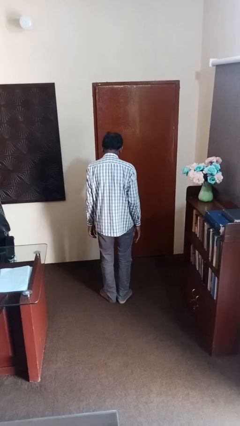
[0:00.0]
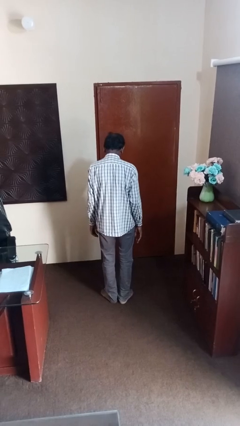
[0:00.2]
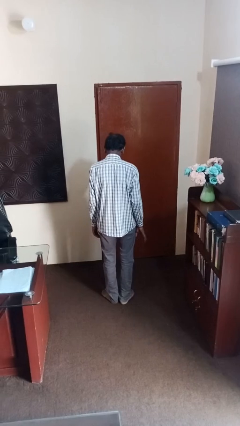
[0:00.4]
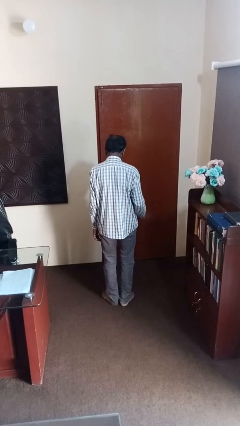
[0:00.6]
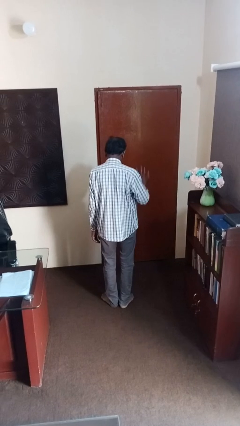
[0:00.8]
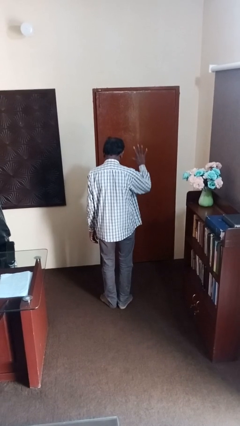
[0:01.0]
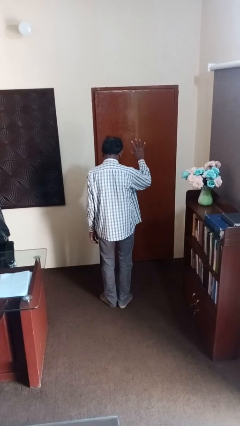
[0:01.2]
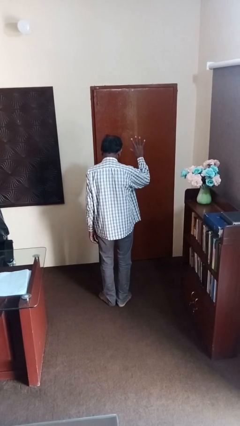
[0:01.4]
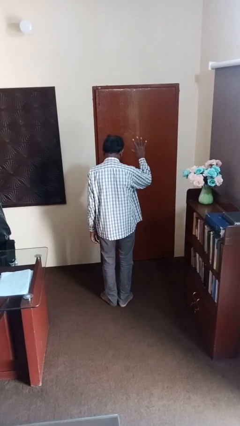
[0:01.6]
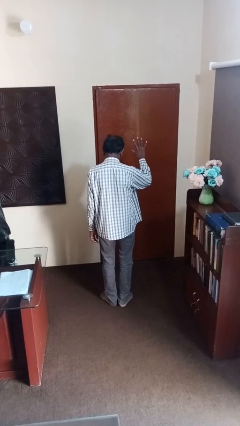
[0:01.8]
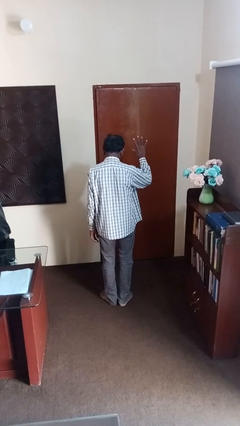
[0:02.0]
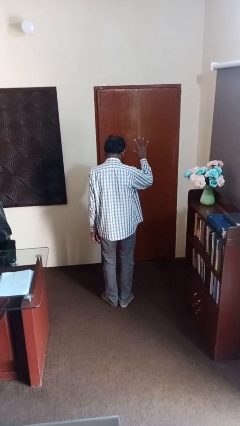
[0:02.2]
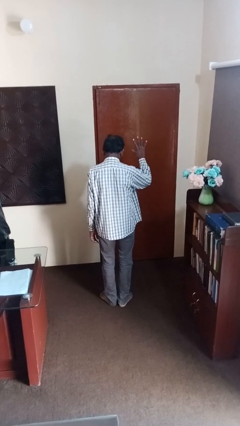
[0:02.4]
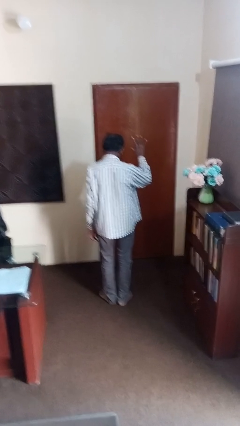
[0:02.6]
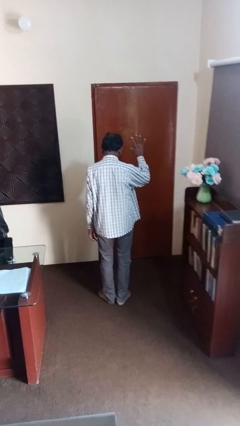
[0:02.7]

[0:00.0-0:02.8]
person gestures number five

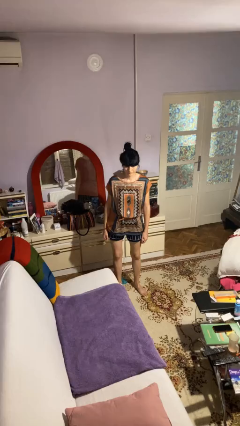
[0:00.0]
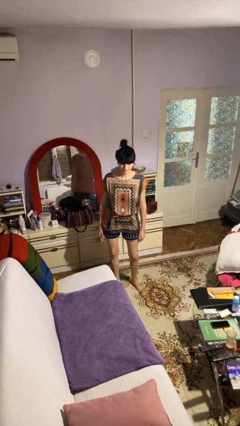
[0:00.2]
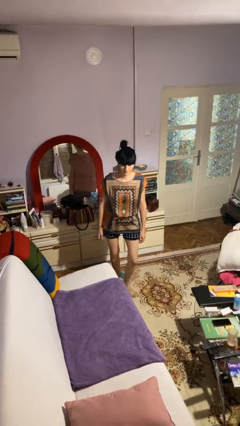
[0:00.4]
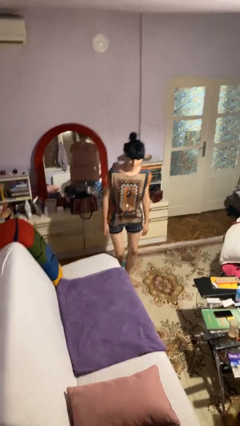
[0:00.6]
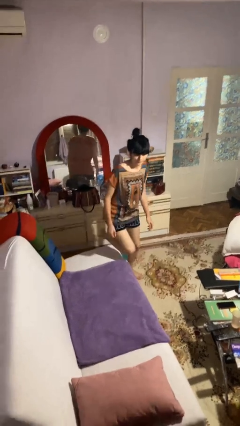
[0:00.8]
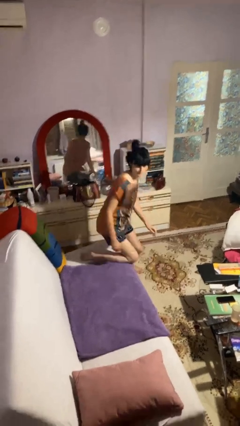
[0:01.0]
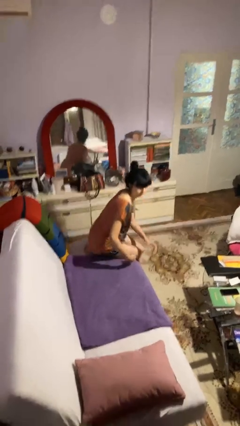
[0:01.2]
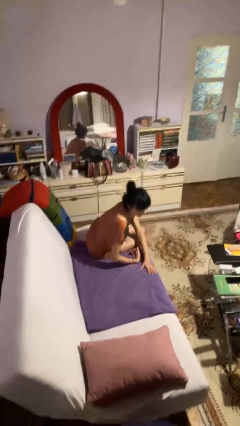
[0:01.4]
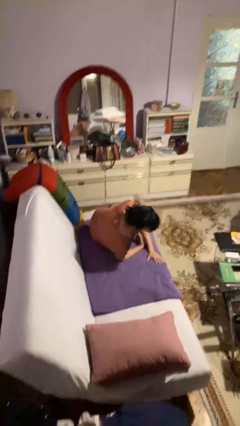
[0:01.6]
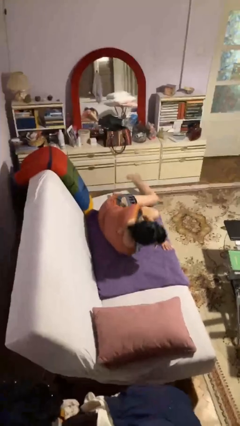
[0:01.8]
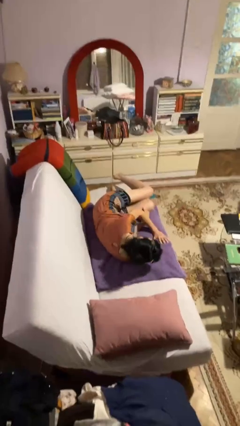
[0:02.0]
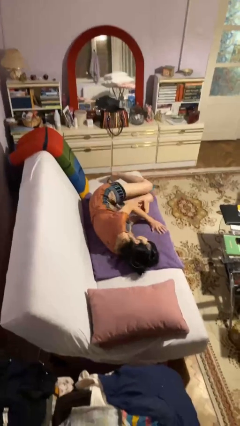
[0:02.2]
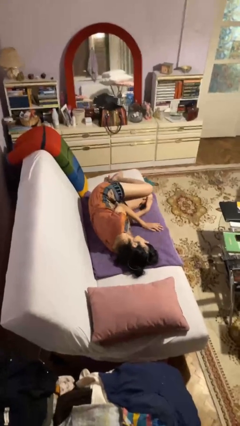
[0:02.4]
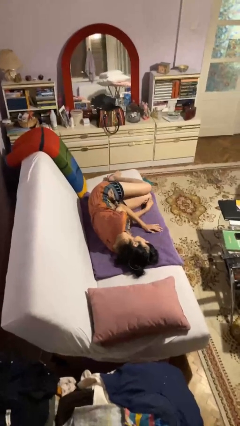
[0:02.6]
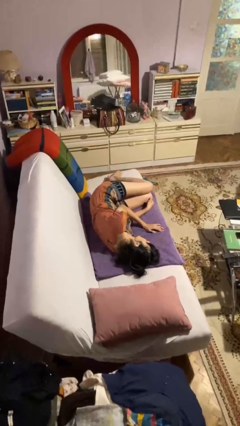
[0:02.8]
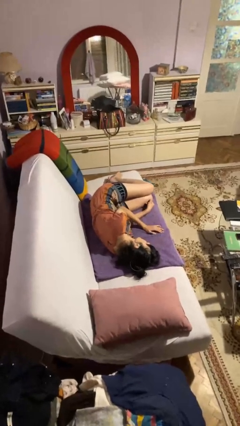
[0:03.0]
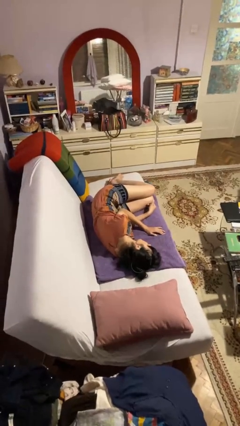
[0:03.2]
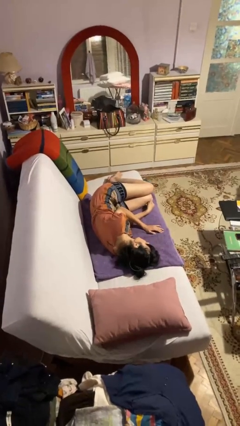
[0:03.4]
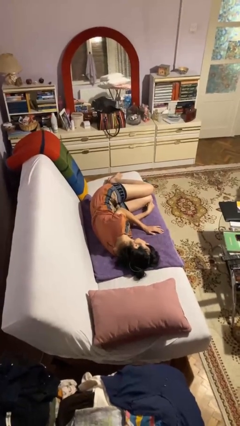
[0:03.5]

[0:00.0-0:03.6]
person lies down on couch

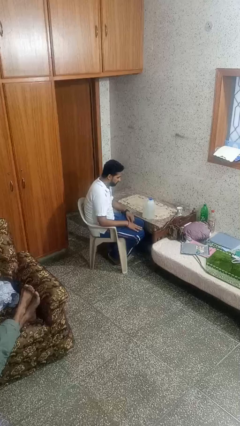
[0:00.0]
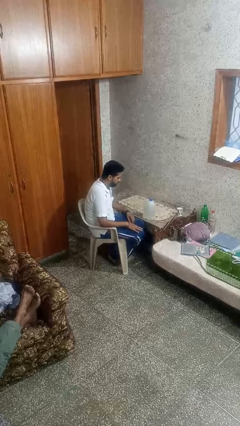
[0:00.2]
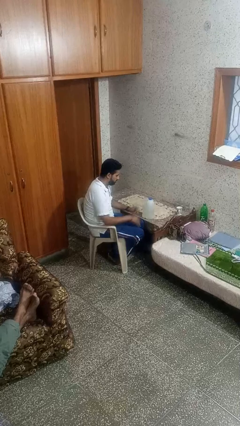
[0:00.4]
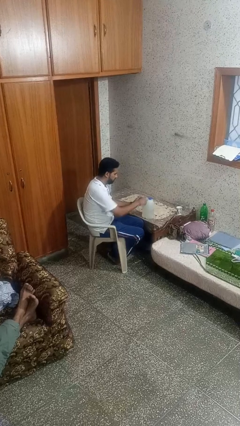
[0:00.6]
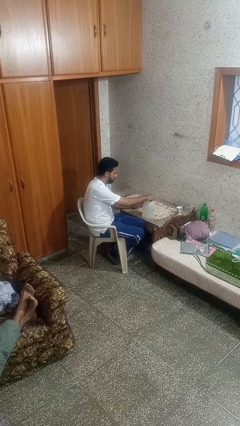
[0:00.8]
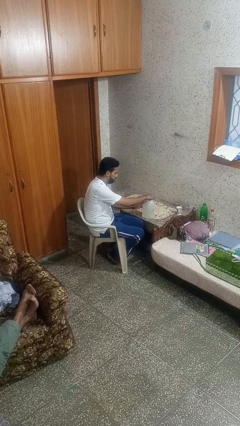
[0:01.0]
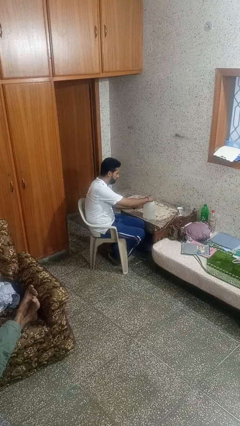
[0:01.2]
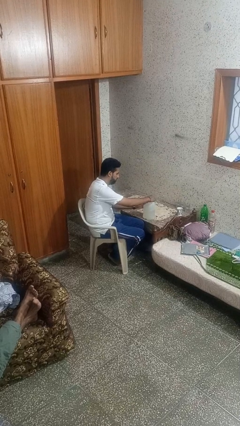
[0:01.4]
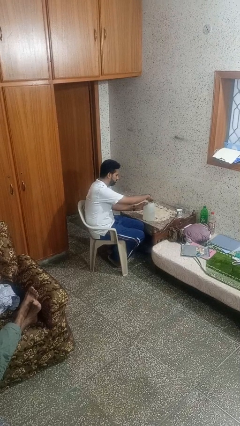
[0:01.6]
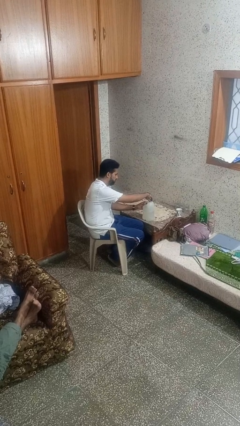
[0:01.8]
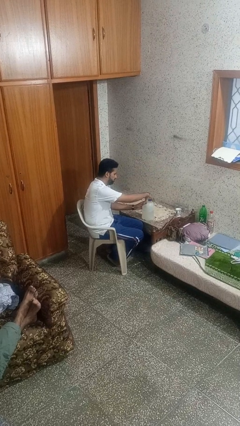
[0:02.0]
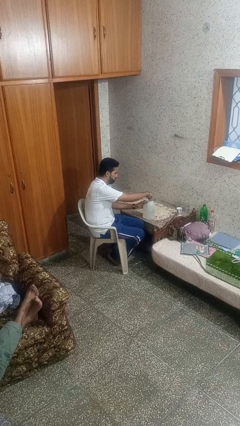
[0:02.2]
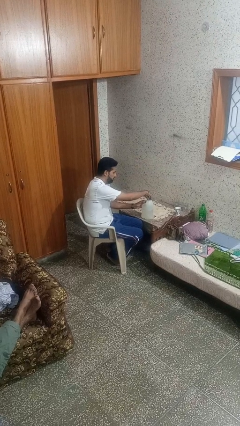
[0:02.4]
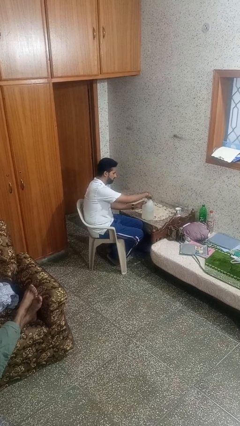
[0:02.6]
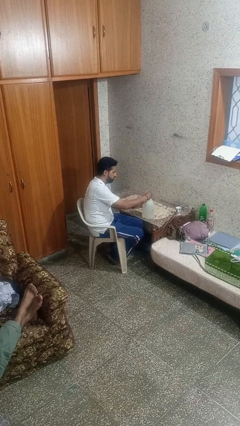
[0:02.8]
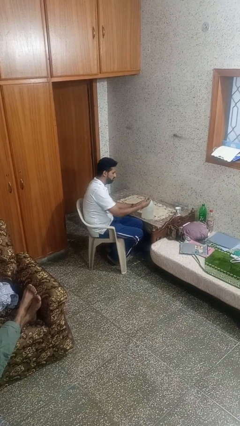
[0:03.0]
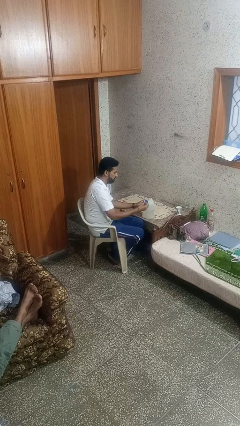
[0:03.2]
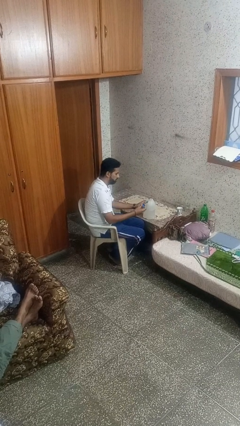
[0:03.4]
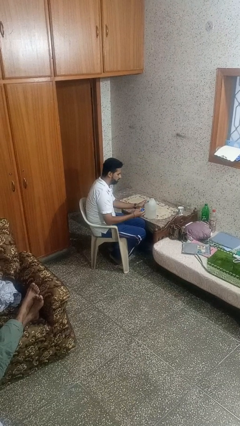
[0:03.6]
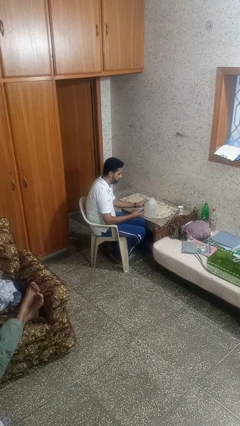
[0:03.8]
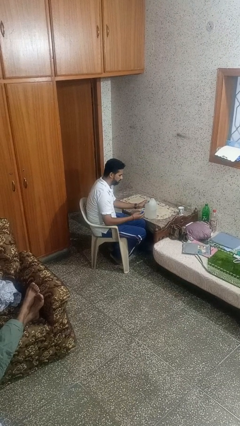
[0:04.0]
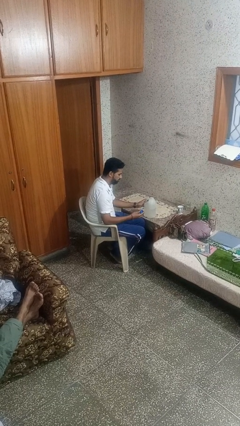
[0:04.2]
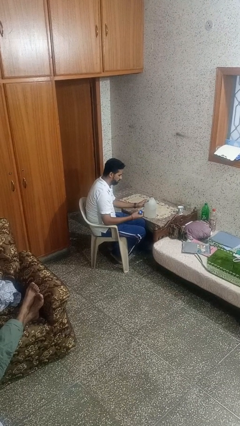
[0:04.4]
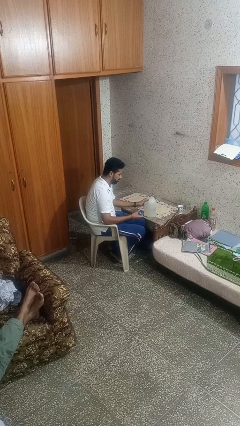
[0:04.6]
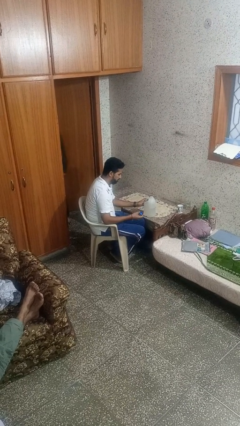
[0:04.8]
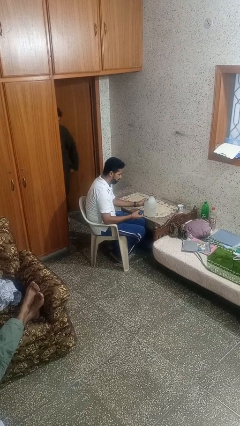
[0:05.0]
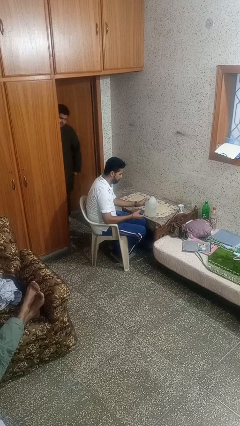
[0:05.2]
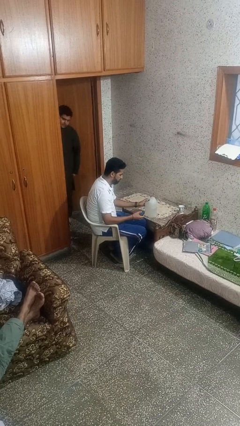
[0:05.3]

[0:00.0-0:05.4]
person unscrews lid from bottle

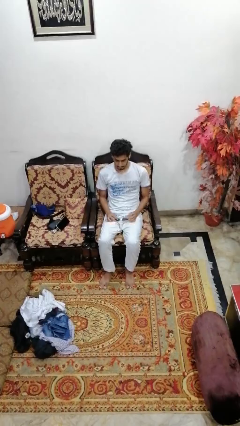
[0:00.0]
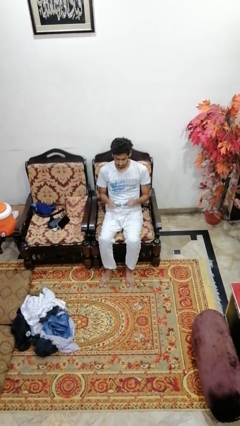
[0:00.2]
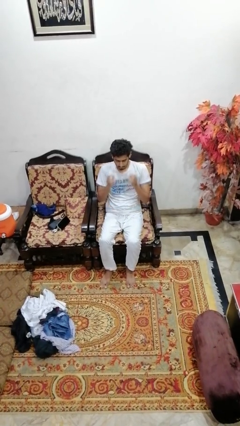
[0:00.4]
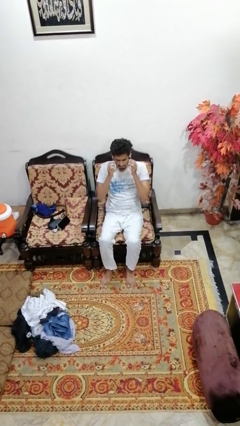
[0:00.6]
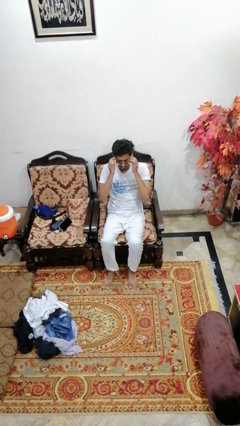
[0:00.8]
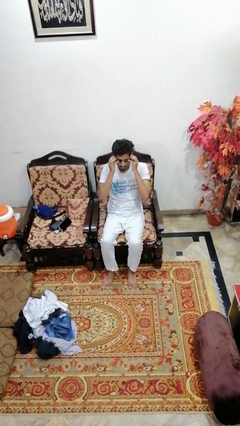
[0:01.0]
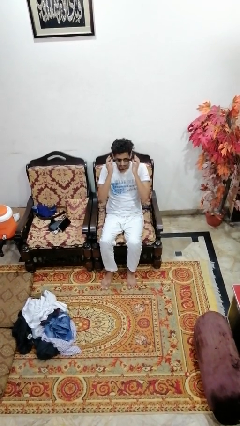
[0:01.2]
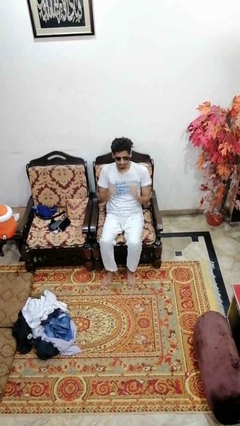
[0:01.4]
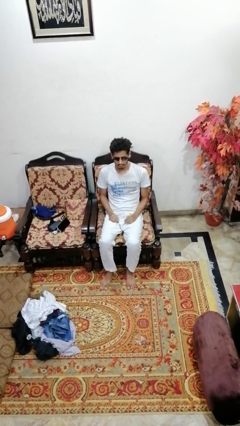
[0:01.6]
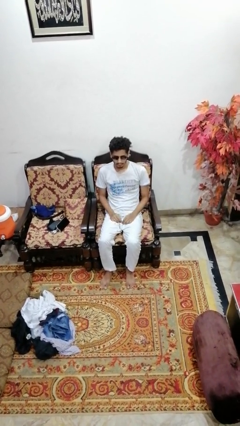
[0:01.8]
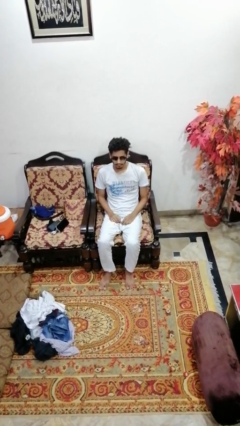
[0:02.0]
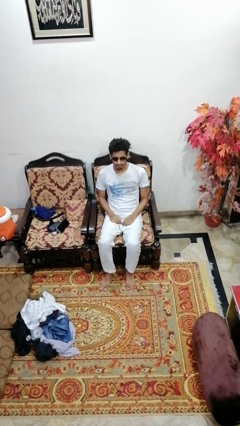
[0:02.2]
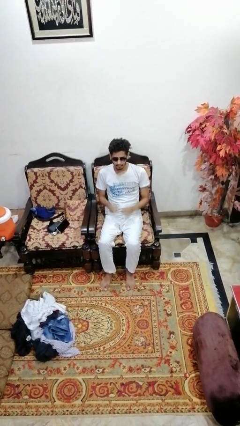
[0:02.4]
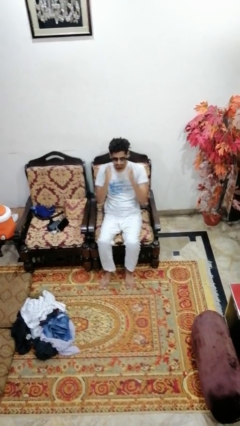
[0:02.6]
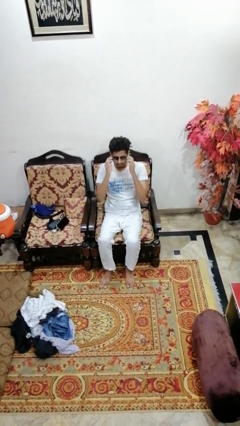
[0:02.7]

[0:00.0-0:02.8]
person puts on sunglasses

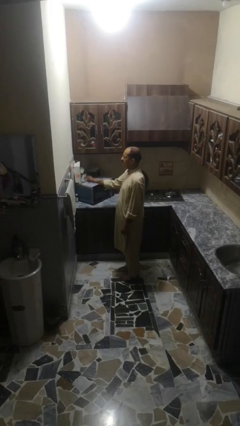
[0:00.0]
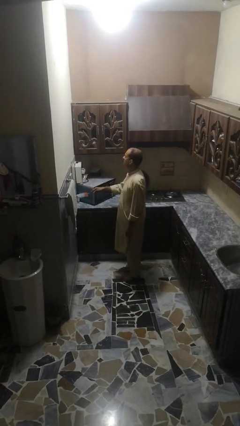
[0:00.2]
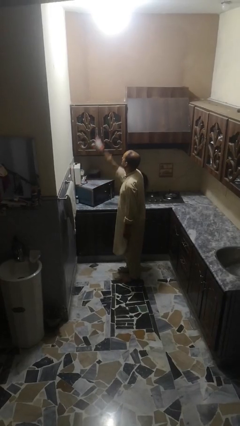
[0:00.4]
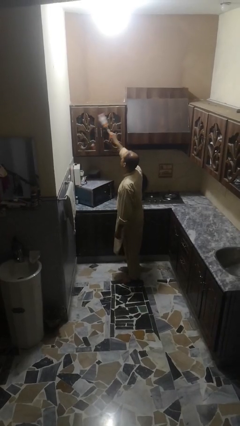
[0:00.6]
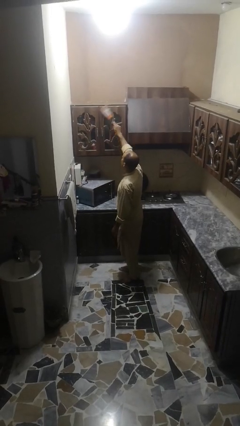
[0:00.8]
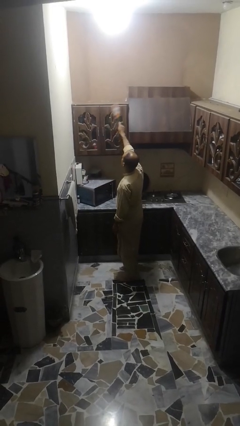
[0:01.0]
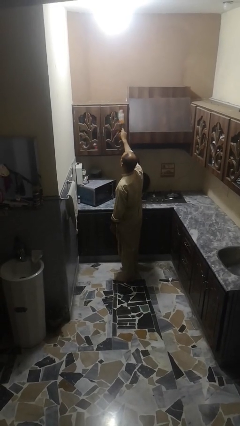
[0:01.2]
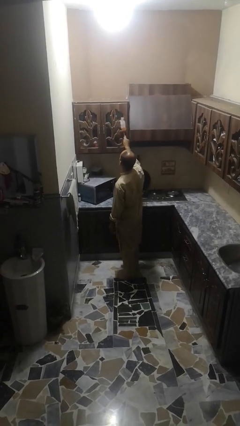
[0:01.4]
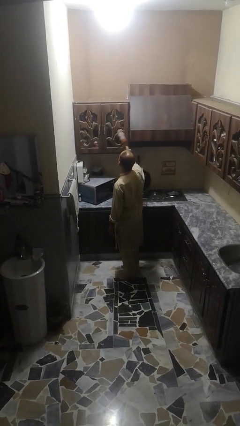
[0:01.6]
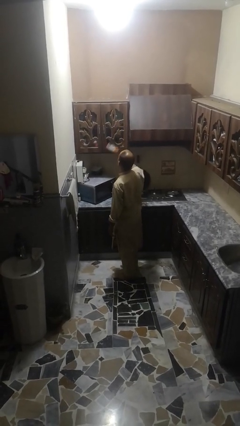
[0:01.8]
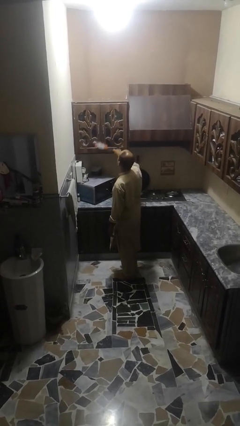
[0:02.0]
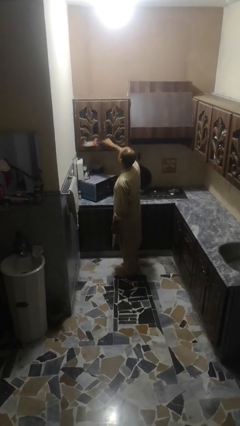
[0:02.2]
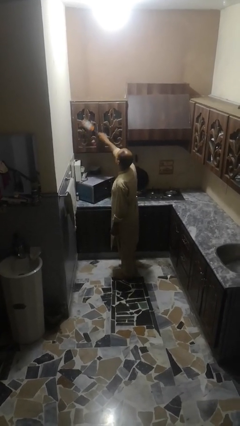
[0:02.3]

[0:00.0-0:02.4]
person dusts furniture

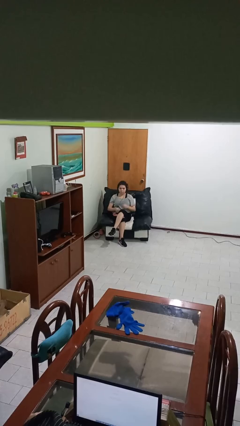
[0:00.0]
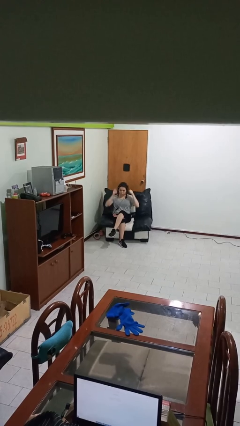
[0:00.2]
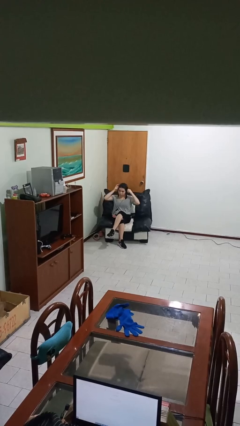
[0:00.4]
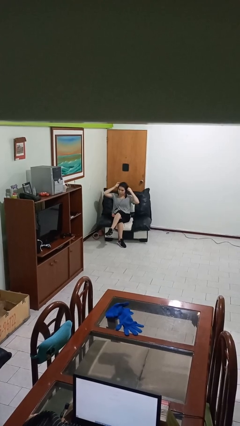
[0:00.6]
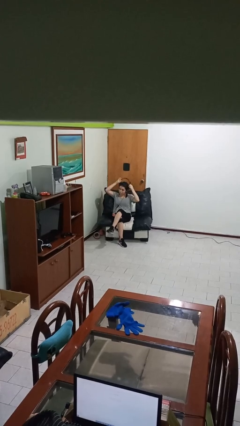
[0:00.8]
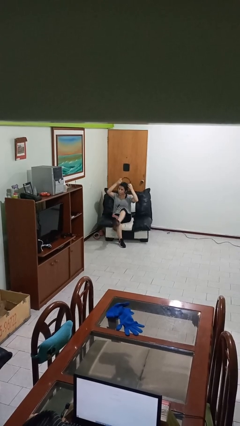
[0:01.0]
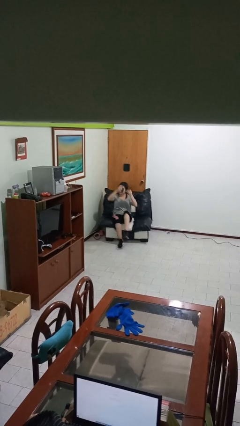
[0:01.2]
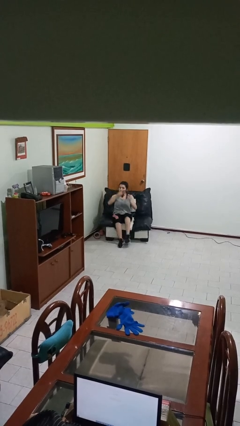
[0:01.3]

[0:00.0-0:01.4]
person takes off headphones
